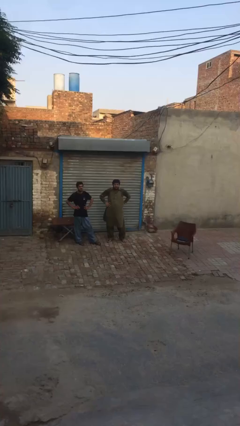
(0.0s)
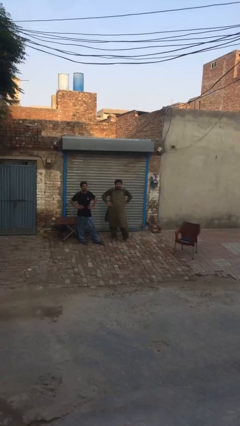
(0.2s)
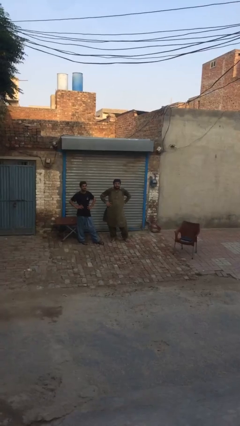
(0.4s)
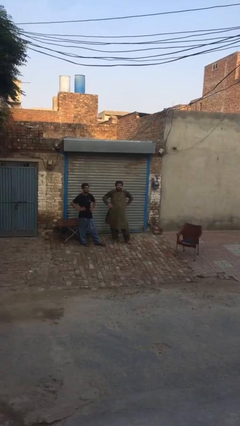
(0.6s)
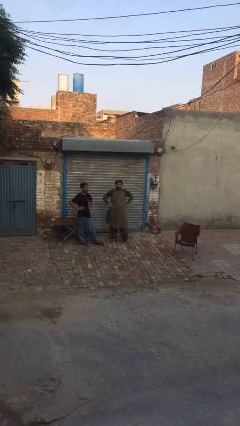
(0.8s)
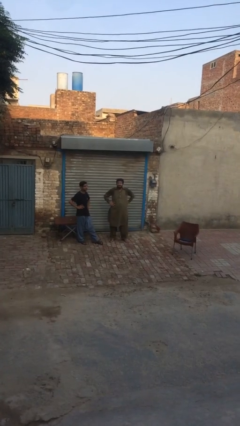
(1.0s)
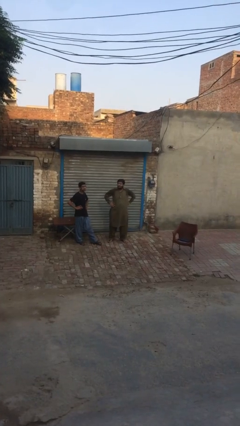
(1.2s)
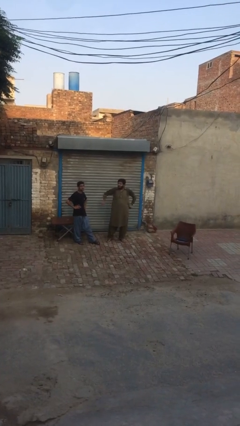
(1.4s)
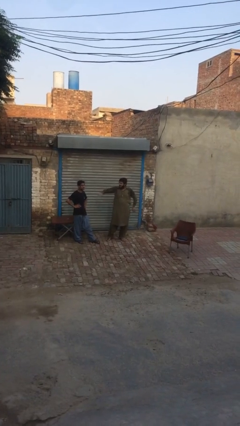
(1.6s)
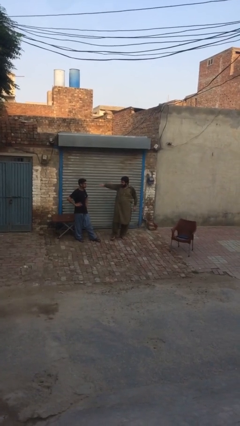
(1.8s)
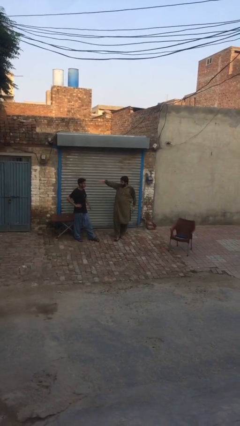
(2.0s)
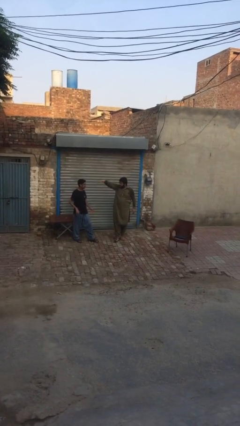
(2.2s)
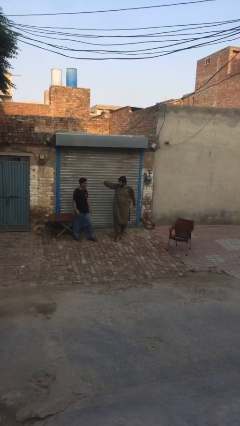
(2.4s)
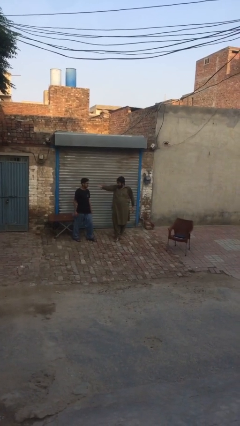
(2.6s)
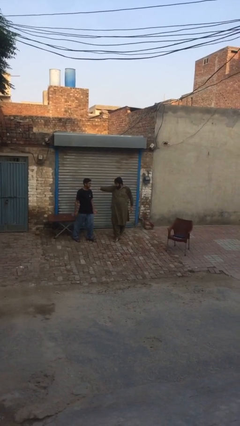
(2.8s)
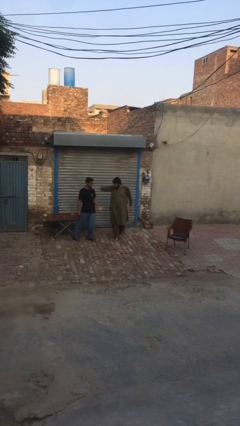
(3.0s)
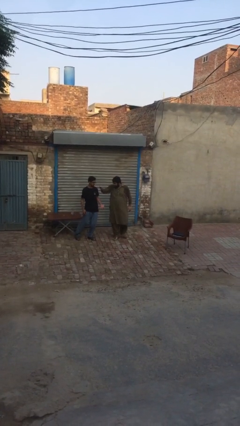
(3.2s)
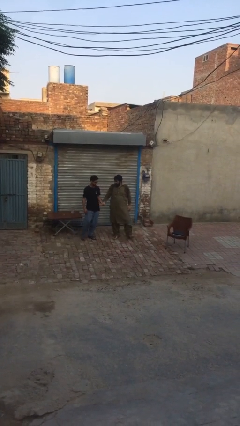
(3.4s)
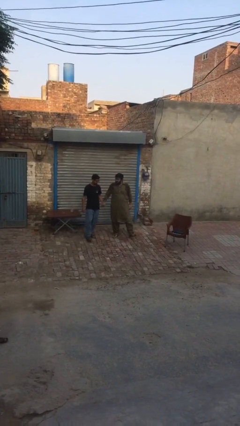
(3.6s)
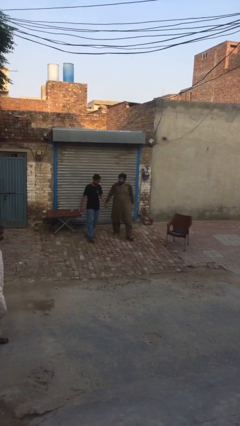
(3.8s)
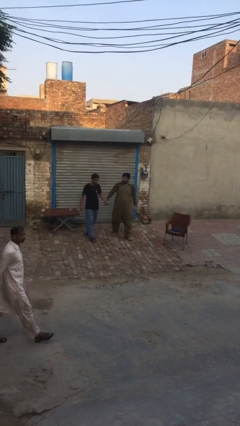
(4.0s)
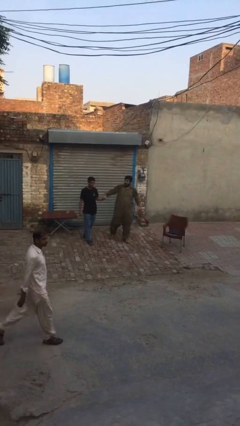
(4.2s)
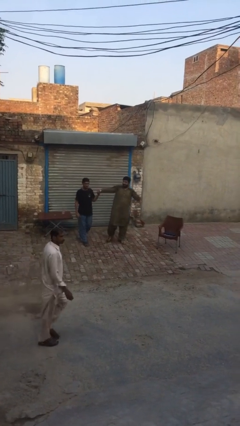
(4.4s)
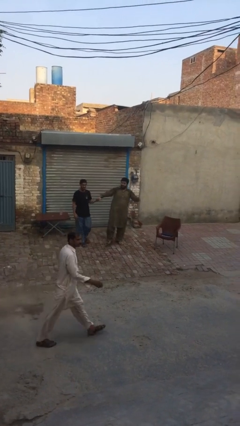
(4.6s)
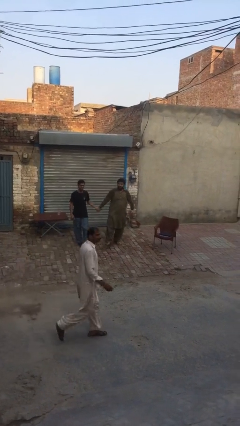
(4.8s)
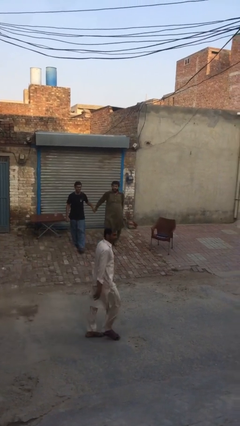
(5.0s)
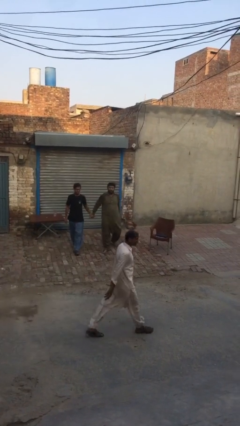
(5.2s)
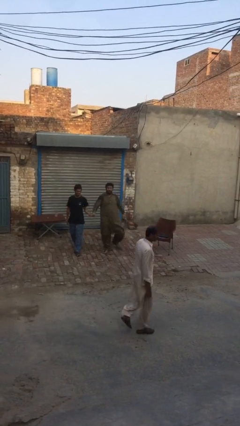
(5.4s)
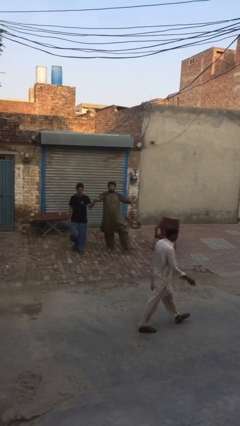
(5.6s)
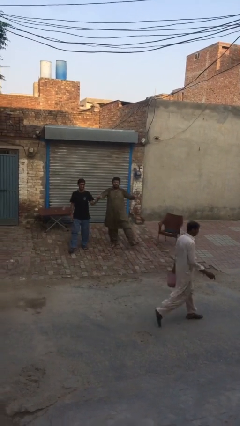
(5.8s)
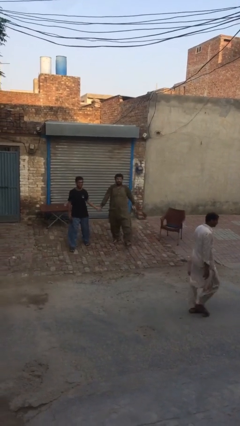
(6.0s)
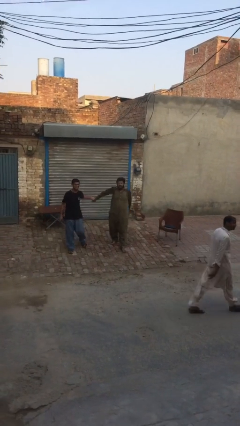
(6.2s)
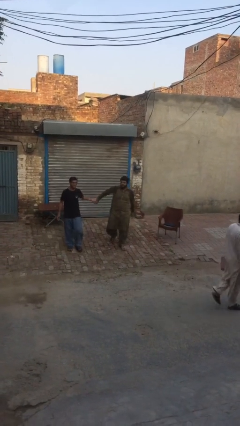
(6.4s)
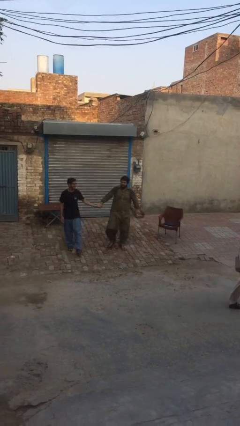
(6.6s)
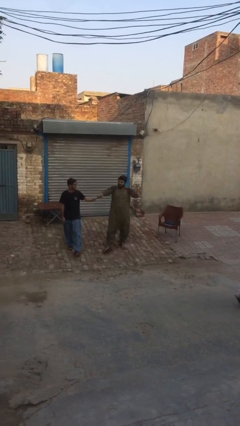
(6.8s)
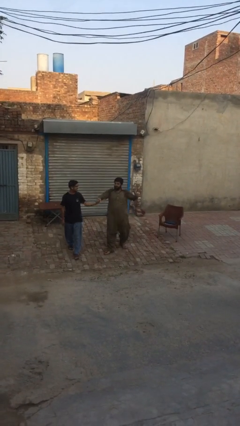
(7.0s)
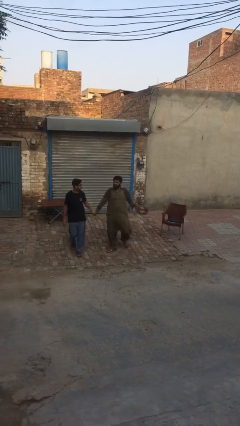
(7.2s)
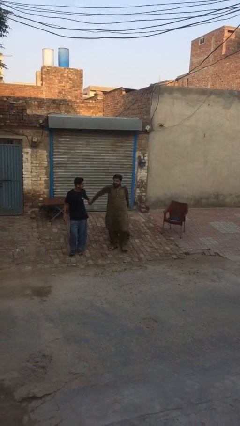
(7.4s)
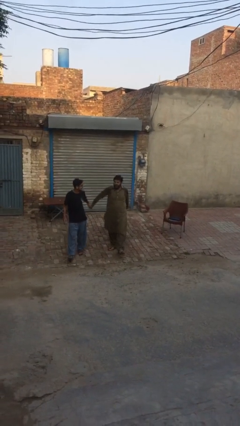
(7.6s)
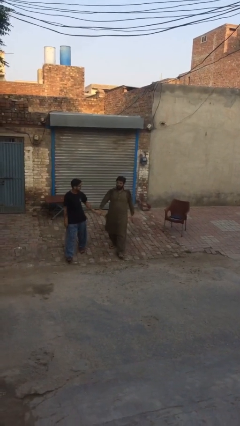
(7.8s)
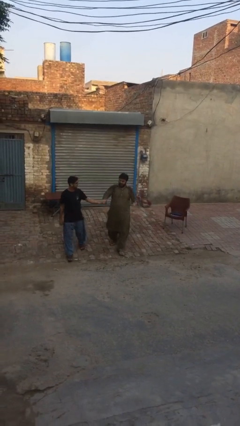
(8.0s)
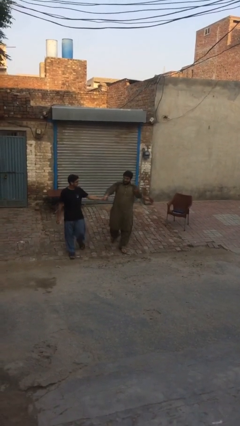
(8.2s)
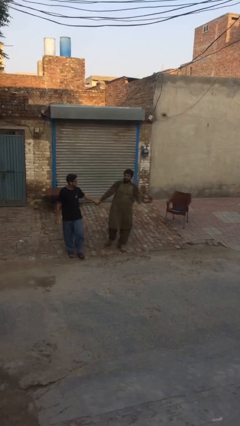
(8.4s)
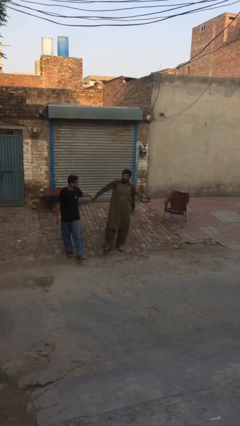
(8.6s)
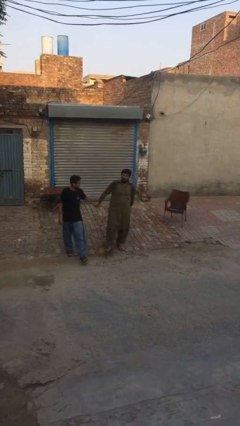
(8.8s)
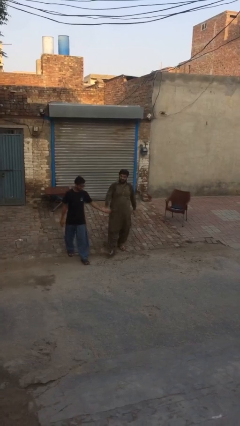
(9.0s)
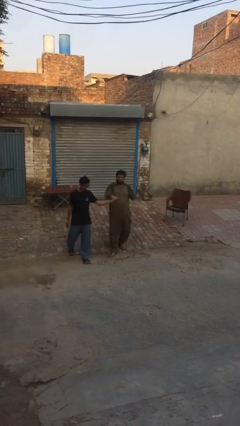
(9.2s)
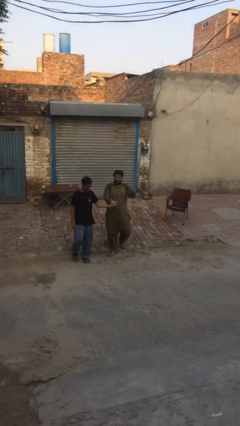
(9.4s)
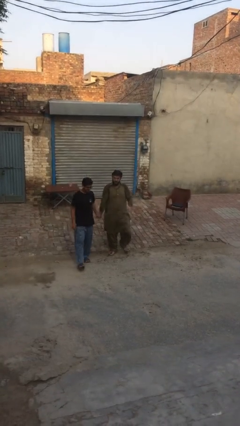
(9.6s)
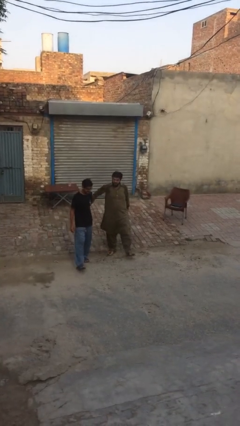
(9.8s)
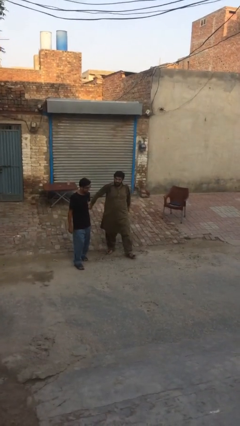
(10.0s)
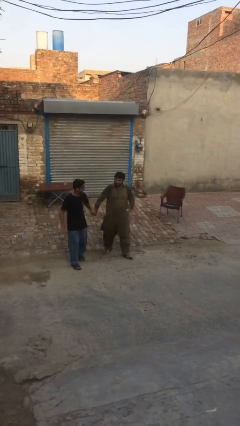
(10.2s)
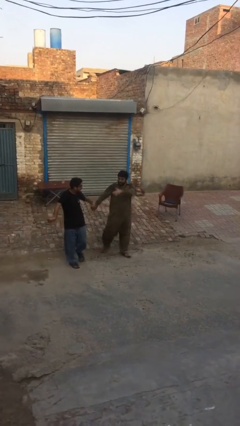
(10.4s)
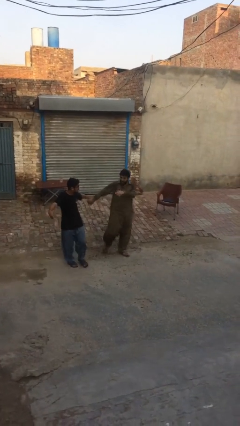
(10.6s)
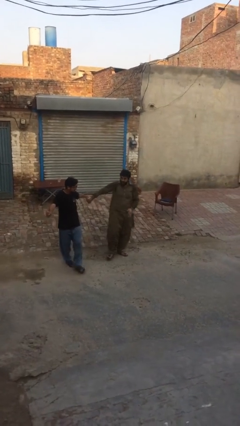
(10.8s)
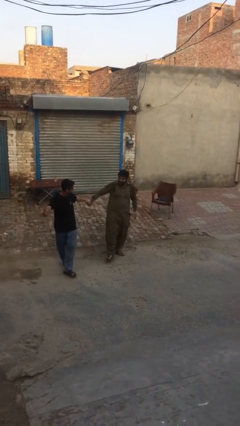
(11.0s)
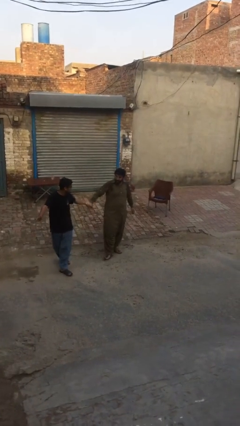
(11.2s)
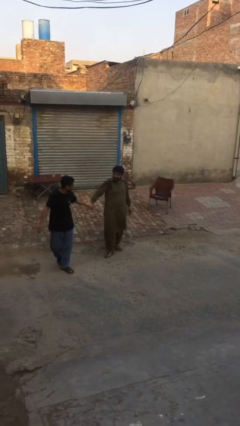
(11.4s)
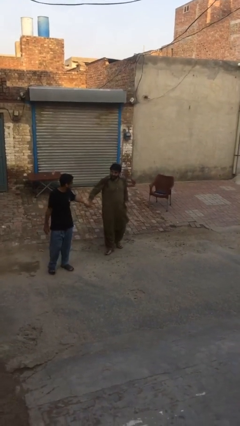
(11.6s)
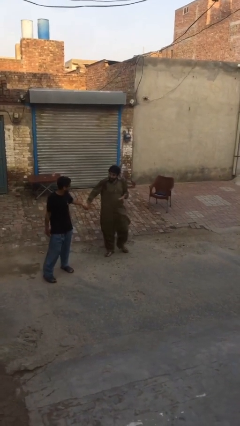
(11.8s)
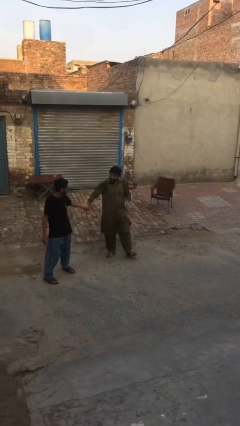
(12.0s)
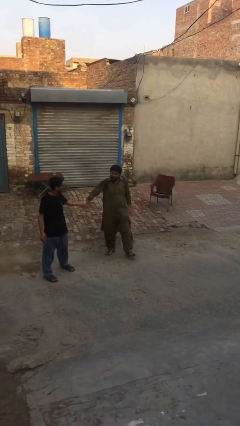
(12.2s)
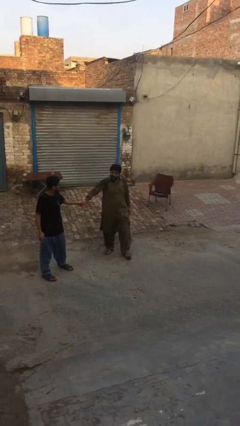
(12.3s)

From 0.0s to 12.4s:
person holds hand

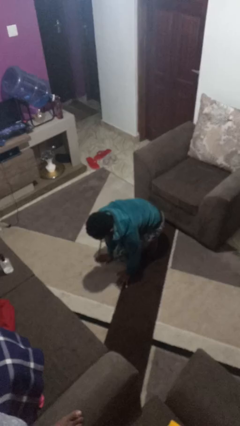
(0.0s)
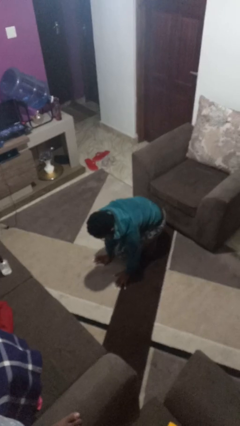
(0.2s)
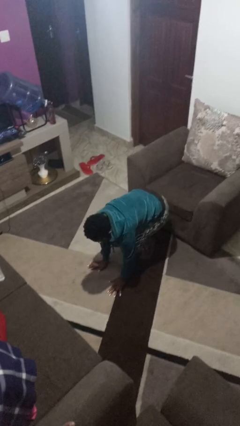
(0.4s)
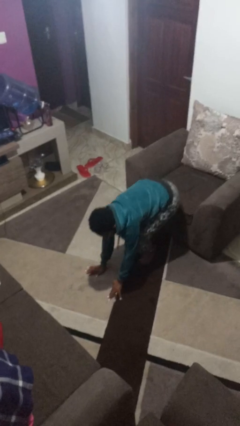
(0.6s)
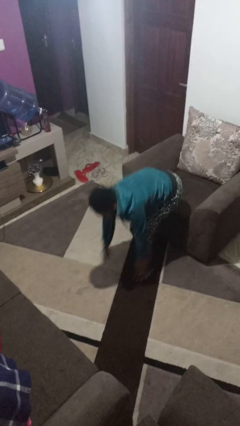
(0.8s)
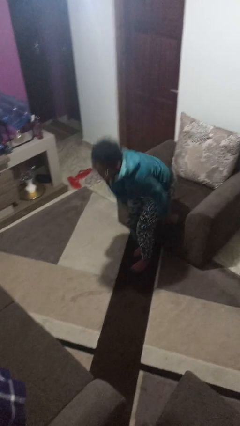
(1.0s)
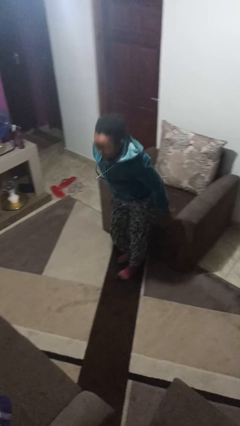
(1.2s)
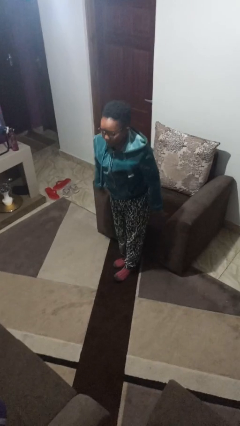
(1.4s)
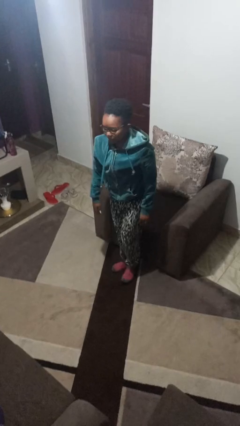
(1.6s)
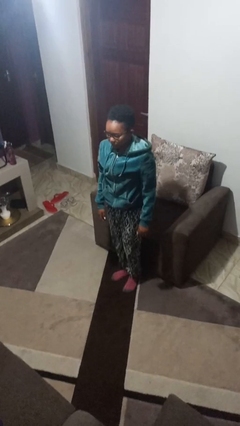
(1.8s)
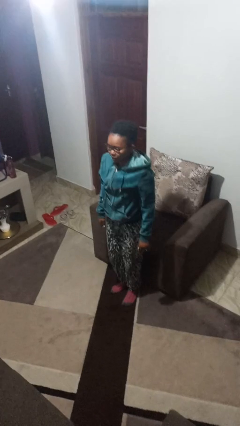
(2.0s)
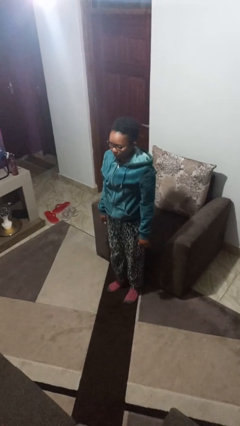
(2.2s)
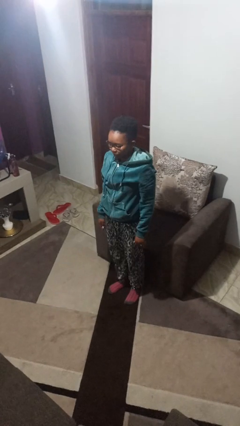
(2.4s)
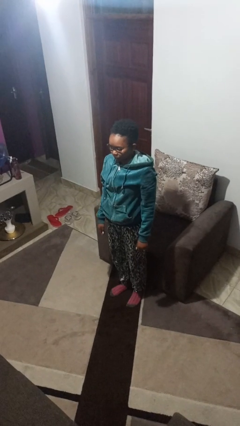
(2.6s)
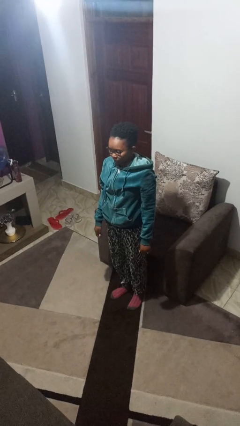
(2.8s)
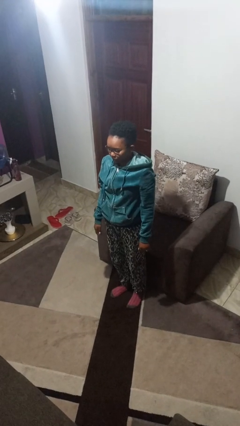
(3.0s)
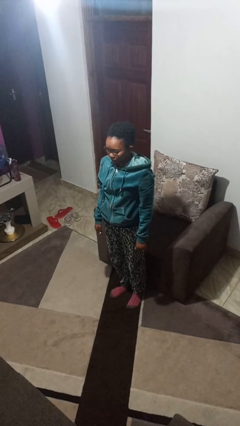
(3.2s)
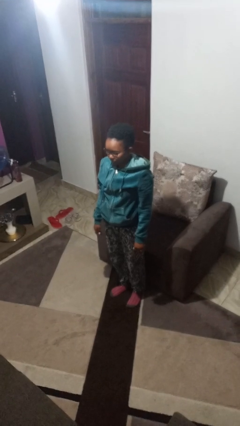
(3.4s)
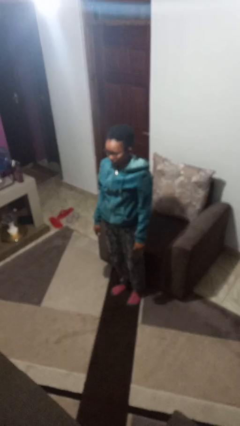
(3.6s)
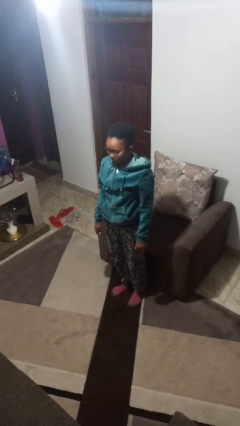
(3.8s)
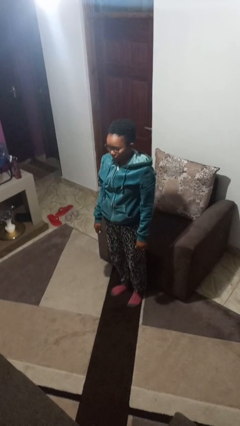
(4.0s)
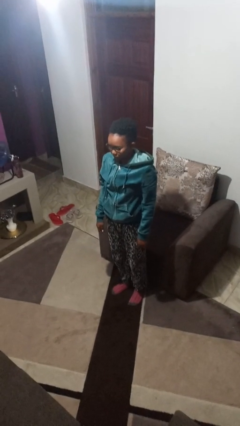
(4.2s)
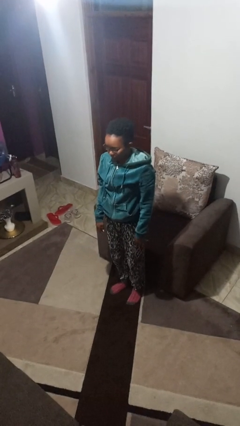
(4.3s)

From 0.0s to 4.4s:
person stands up from floor

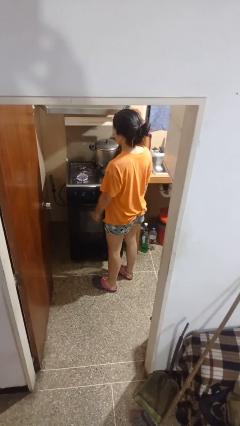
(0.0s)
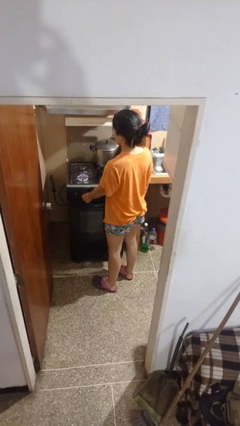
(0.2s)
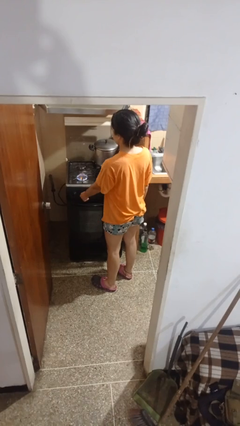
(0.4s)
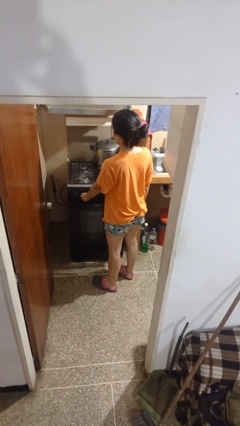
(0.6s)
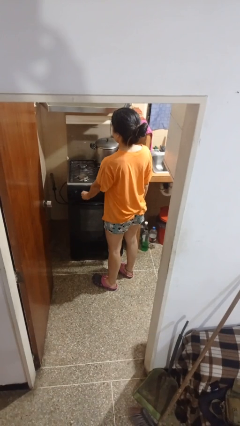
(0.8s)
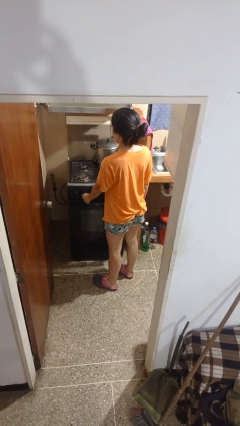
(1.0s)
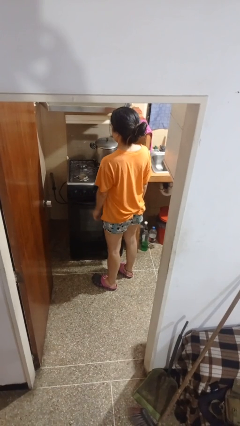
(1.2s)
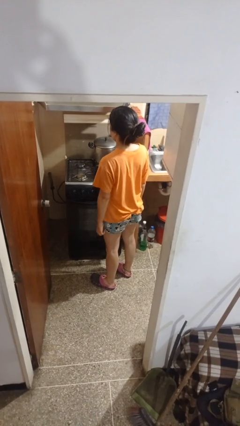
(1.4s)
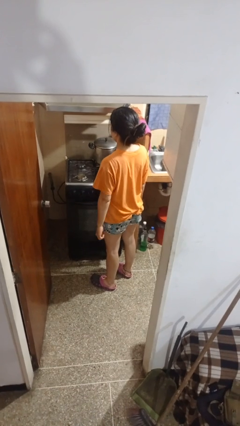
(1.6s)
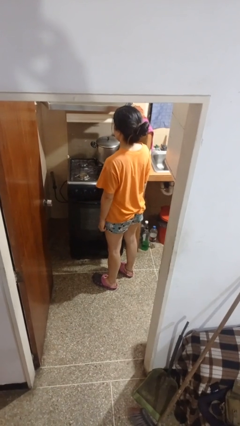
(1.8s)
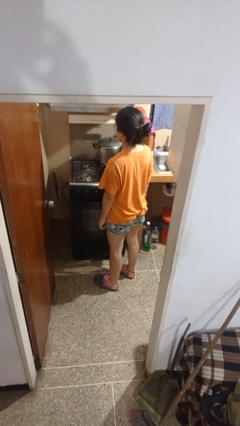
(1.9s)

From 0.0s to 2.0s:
person turns off stovetop
